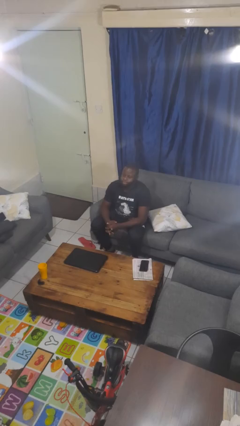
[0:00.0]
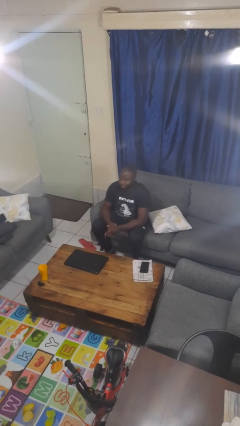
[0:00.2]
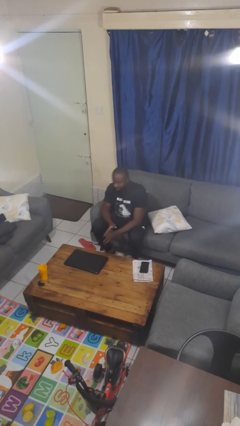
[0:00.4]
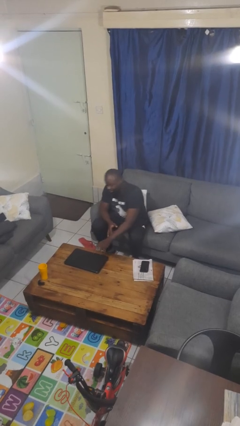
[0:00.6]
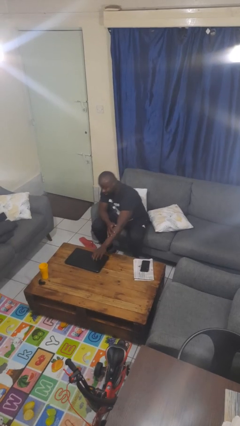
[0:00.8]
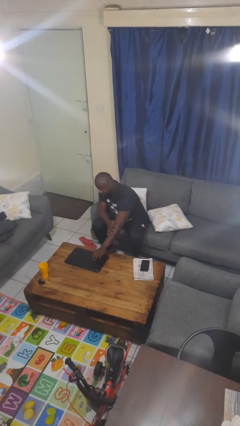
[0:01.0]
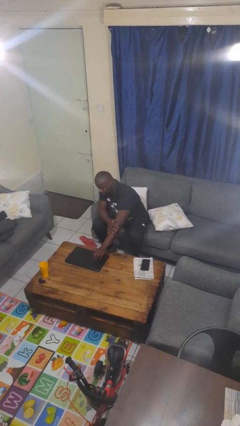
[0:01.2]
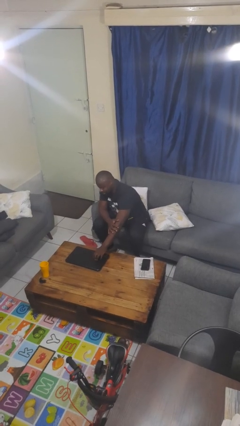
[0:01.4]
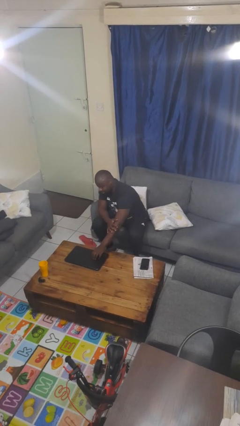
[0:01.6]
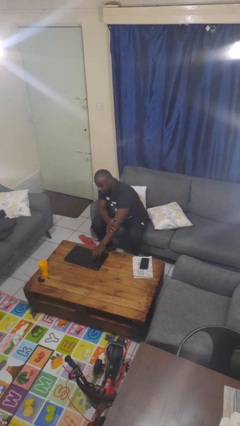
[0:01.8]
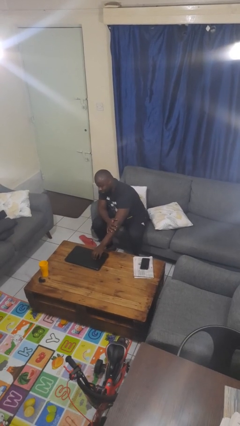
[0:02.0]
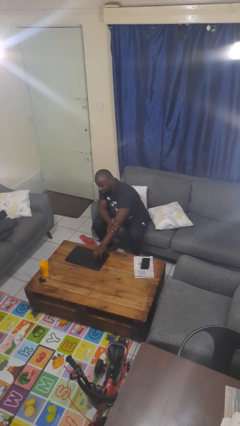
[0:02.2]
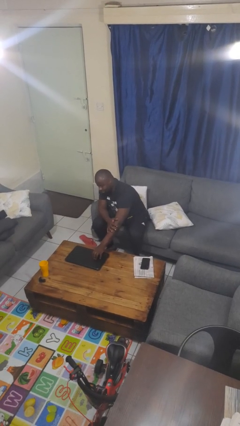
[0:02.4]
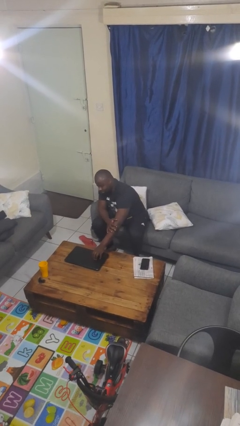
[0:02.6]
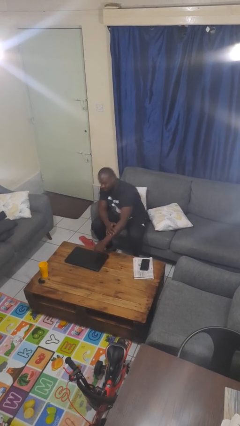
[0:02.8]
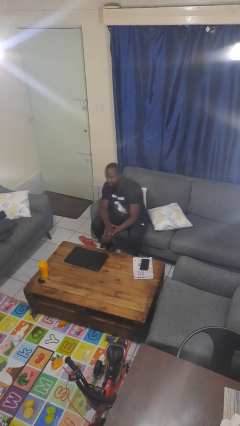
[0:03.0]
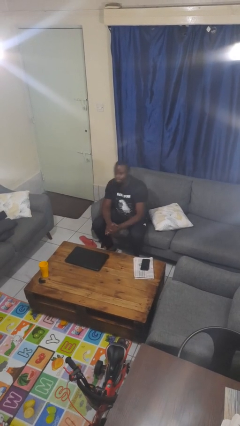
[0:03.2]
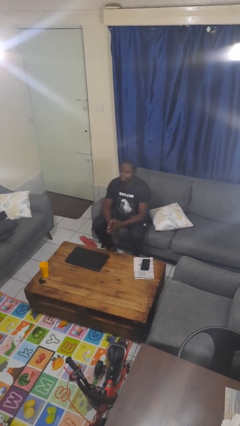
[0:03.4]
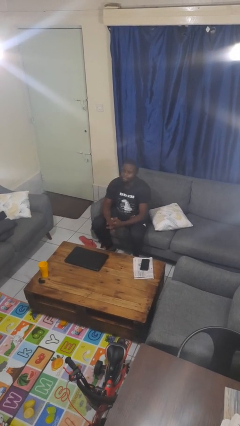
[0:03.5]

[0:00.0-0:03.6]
person taps object with finger

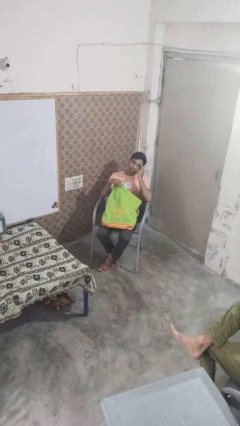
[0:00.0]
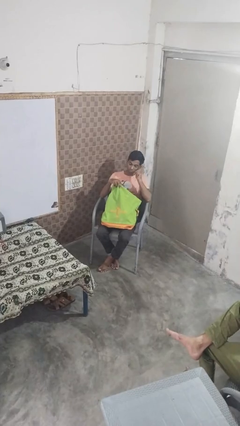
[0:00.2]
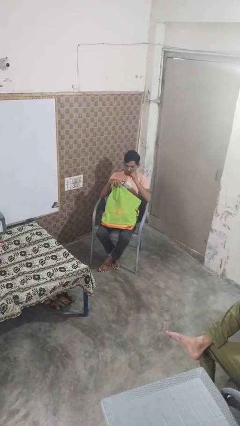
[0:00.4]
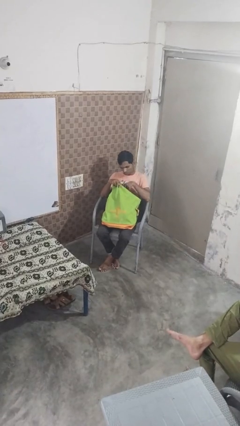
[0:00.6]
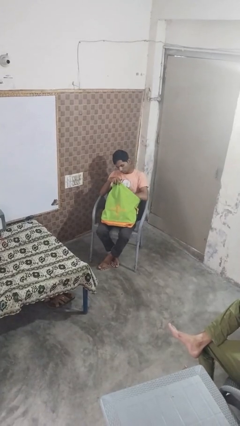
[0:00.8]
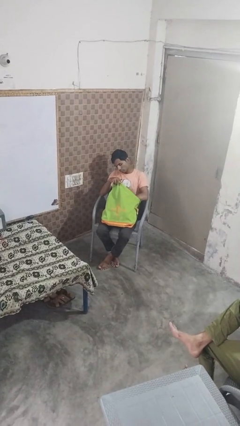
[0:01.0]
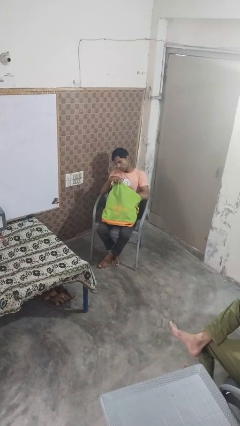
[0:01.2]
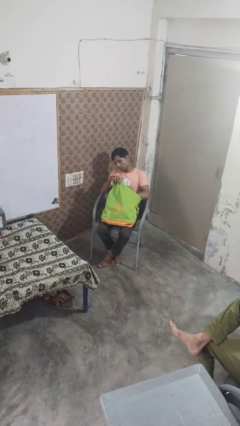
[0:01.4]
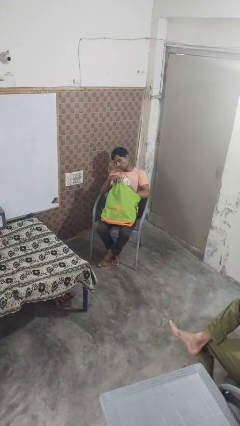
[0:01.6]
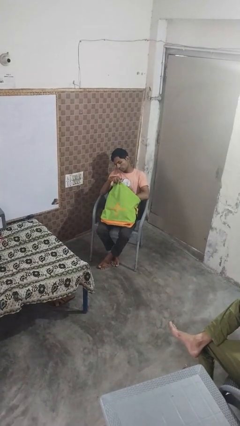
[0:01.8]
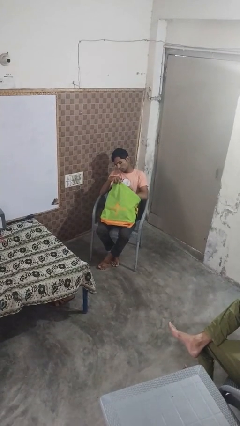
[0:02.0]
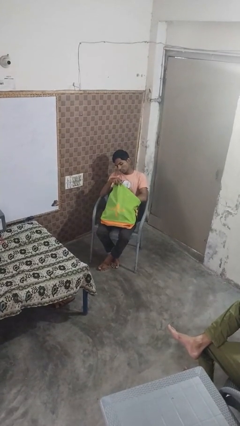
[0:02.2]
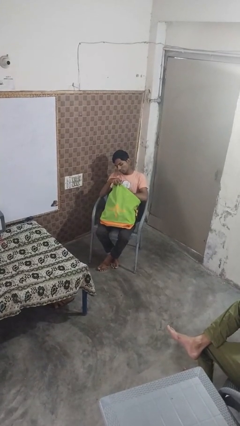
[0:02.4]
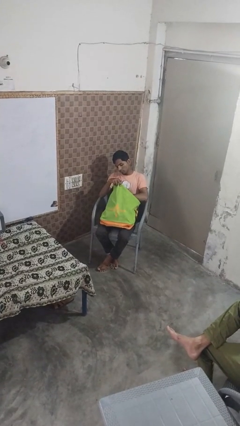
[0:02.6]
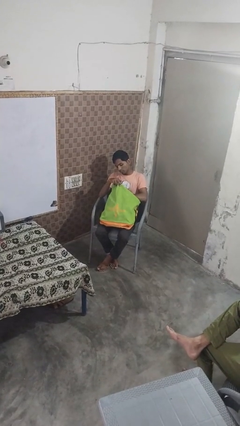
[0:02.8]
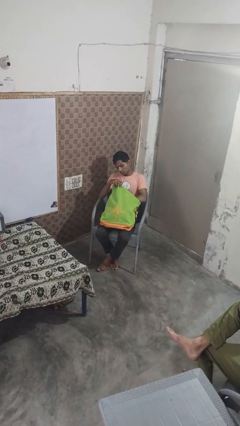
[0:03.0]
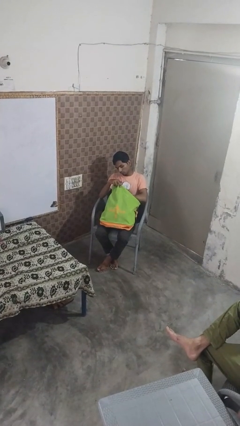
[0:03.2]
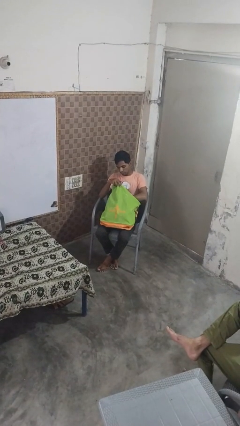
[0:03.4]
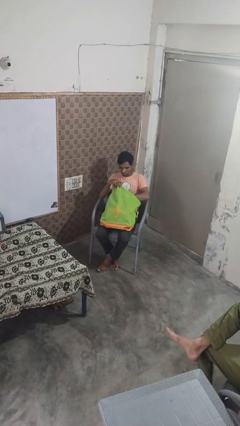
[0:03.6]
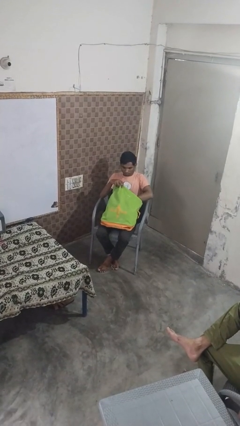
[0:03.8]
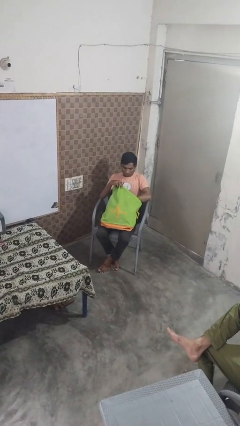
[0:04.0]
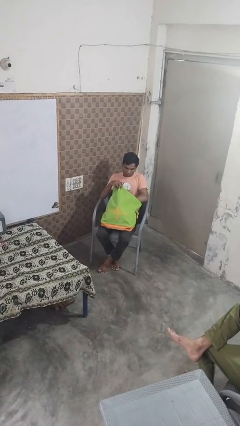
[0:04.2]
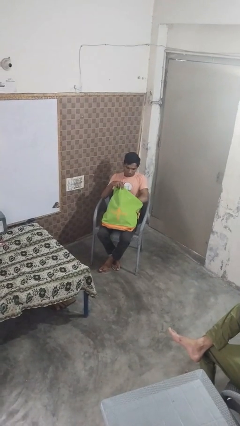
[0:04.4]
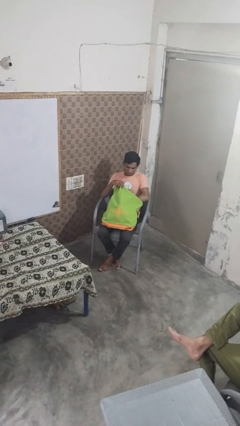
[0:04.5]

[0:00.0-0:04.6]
person searches in bag

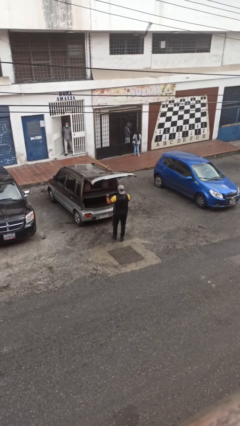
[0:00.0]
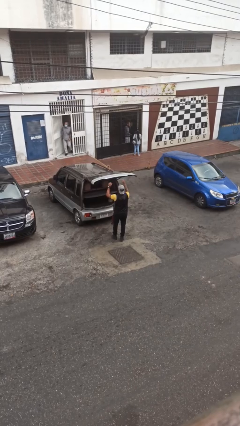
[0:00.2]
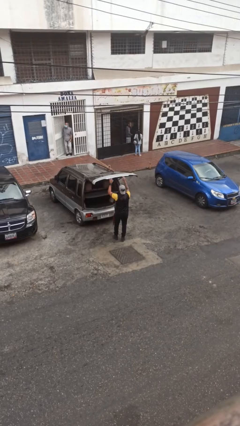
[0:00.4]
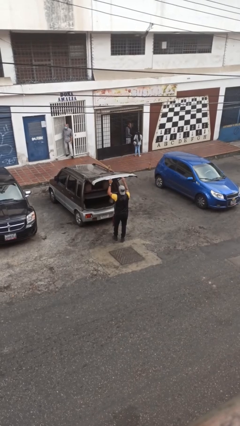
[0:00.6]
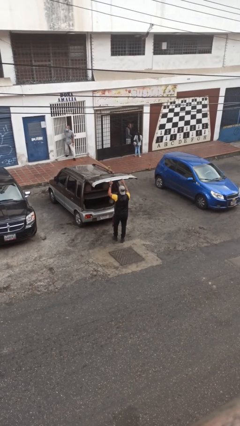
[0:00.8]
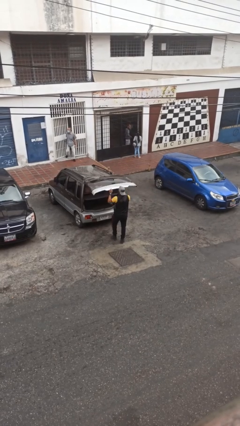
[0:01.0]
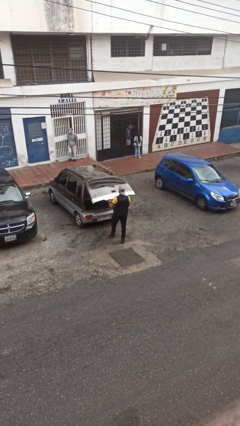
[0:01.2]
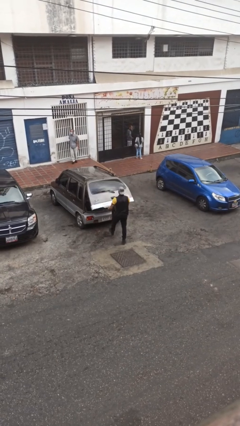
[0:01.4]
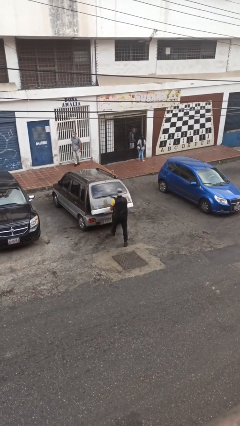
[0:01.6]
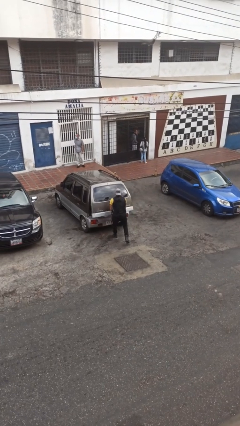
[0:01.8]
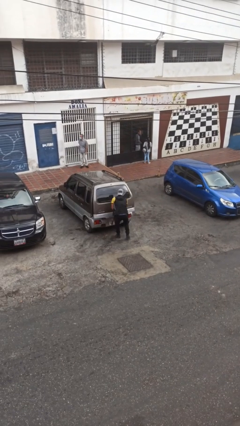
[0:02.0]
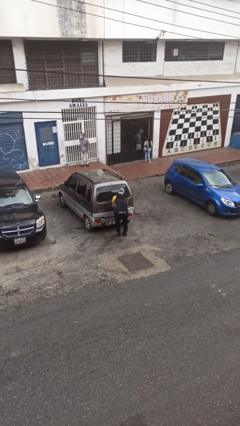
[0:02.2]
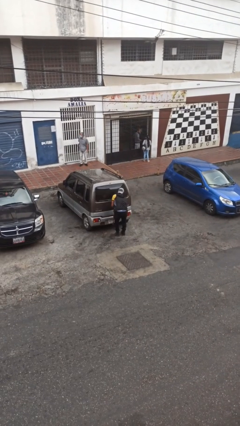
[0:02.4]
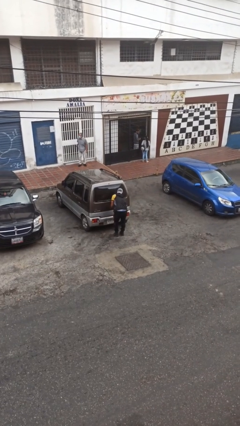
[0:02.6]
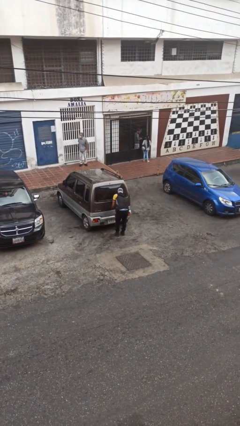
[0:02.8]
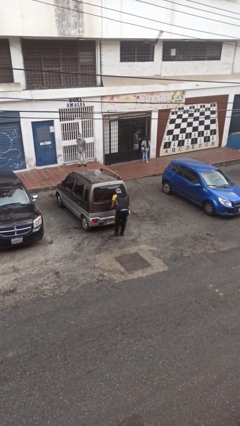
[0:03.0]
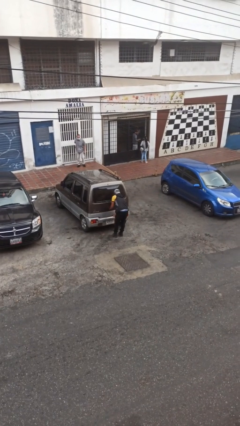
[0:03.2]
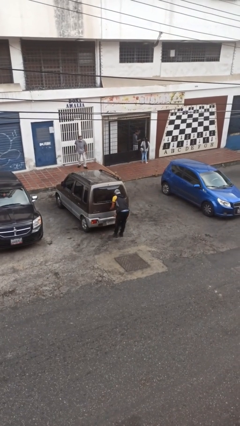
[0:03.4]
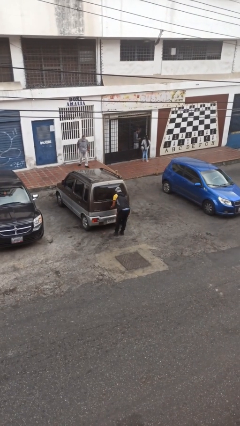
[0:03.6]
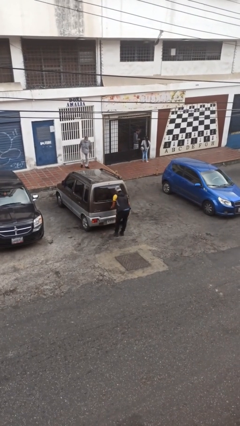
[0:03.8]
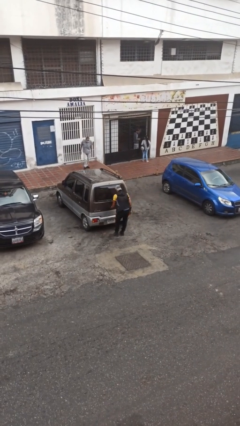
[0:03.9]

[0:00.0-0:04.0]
person closes car trunk

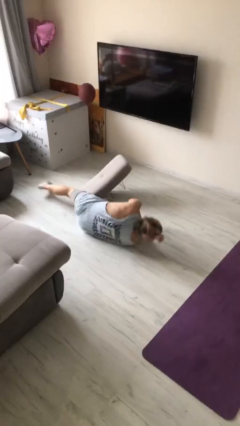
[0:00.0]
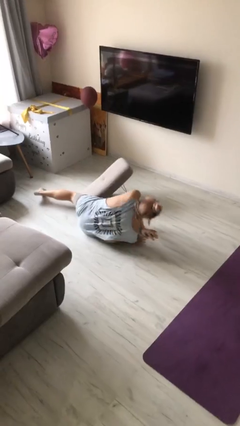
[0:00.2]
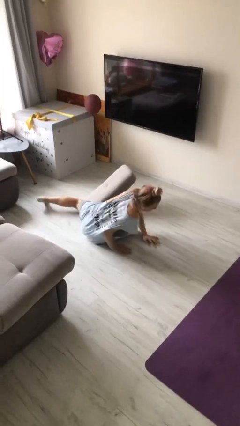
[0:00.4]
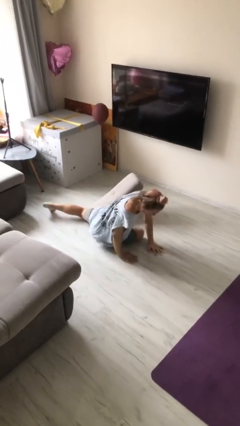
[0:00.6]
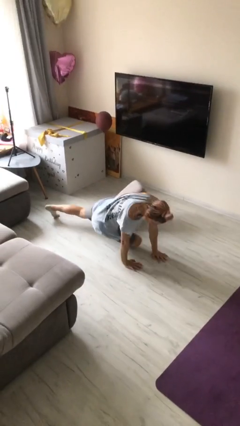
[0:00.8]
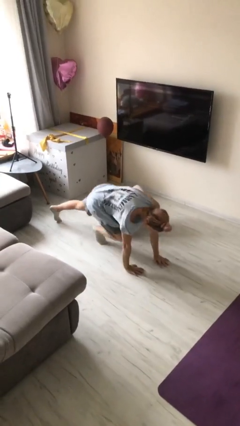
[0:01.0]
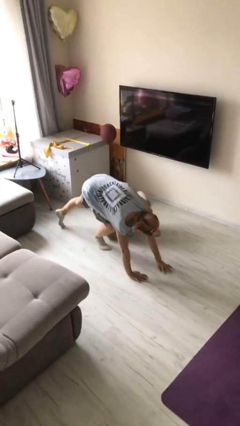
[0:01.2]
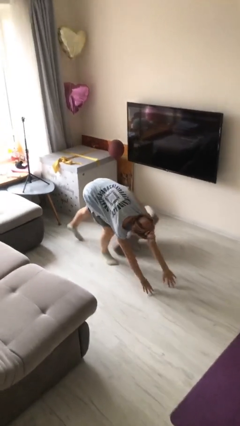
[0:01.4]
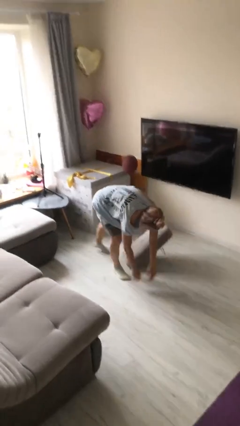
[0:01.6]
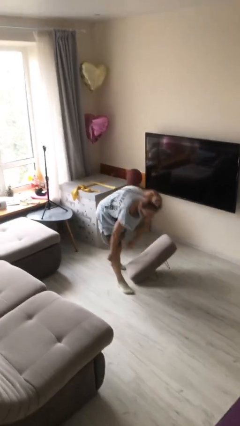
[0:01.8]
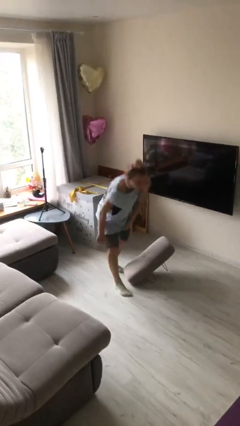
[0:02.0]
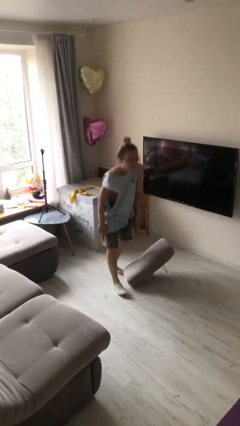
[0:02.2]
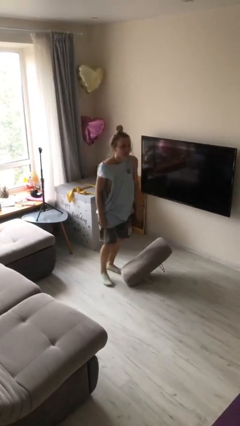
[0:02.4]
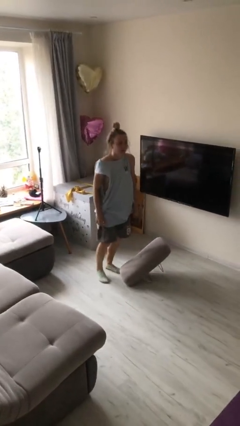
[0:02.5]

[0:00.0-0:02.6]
person stands up from floor

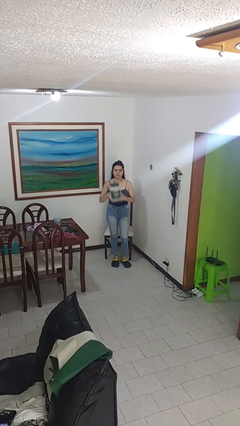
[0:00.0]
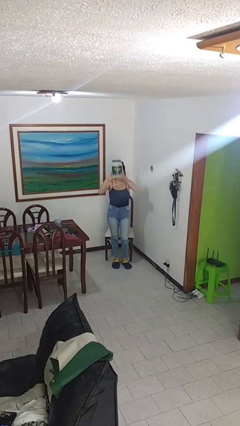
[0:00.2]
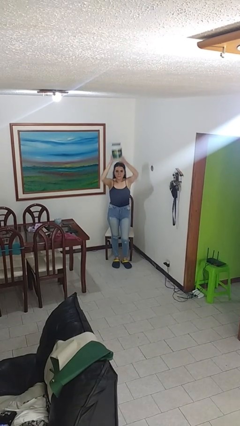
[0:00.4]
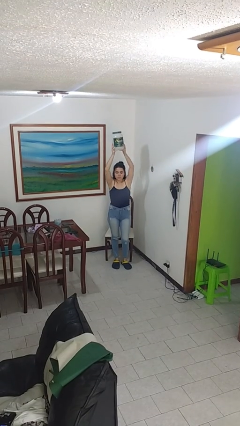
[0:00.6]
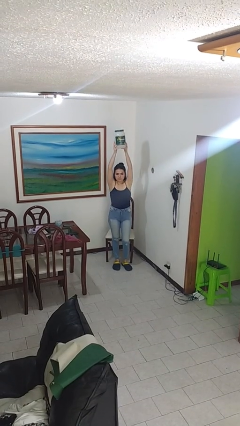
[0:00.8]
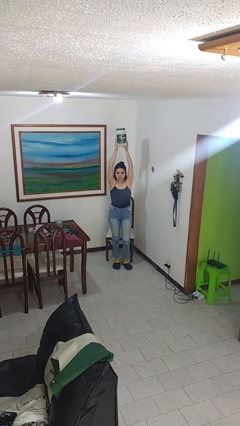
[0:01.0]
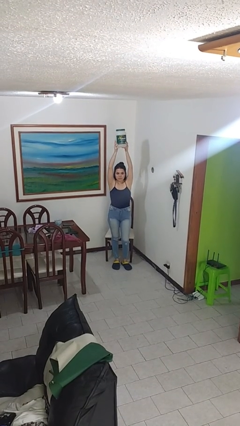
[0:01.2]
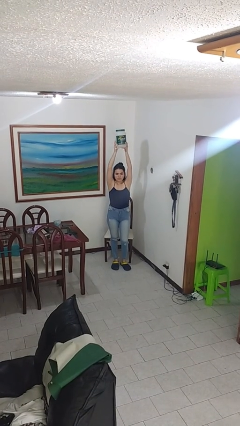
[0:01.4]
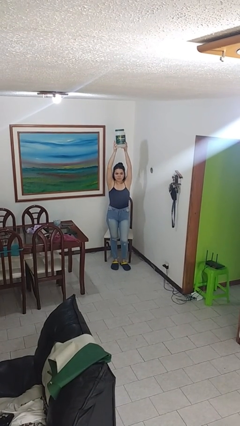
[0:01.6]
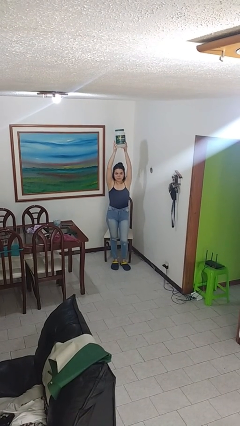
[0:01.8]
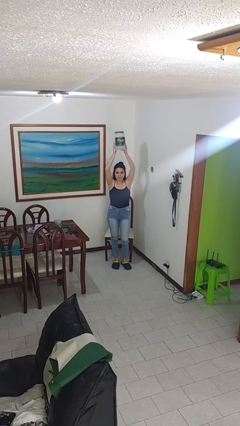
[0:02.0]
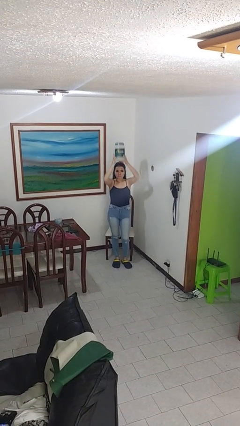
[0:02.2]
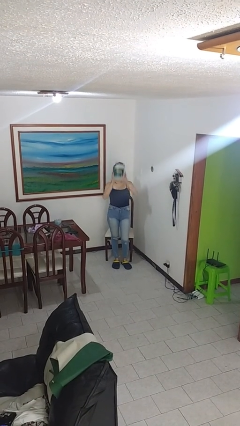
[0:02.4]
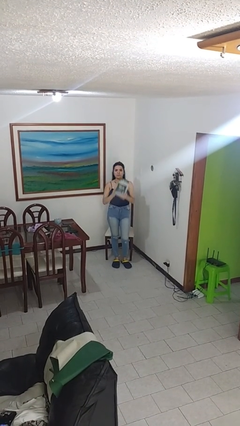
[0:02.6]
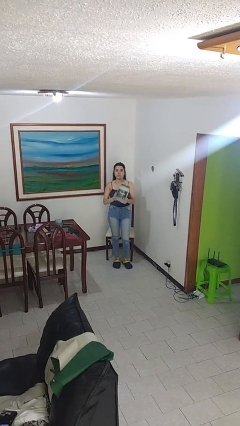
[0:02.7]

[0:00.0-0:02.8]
person holds object above head
